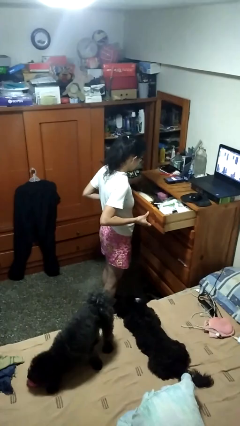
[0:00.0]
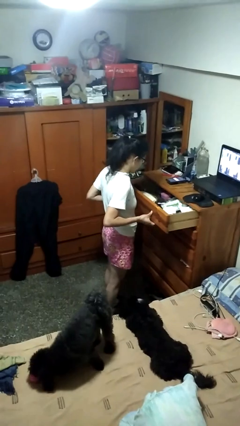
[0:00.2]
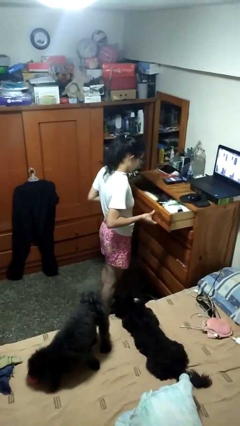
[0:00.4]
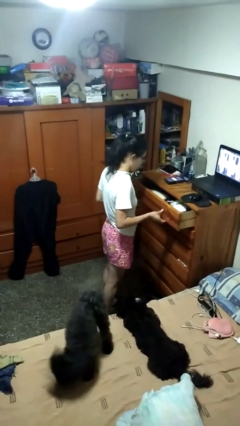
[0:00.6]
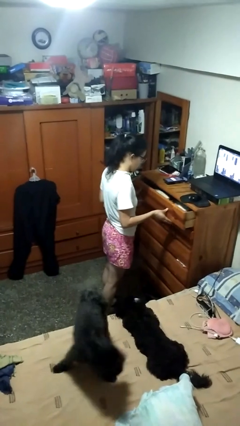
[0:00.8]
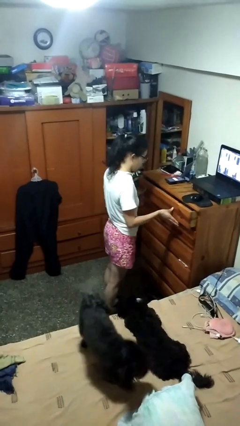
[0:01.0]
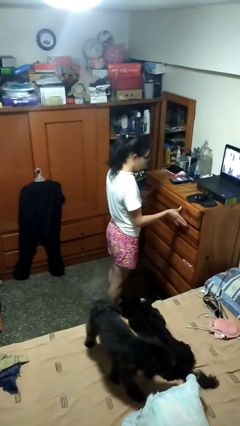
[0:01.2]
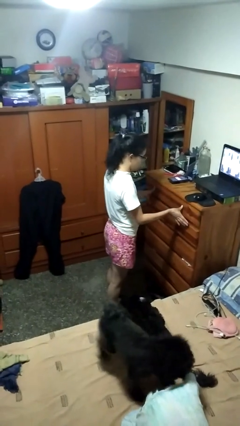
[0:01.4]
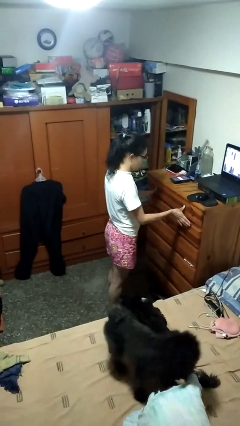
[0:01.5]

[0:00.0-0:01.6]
person closes dresser drawer

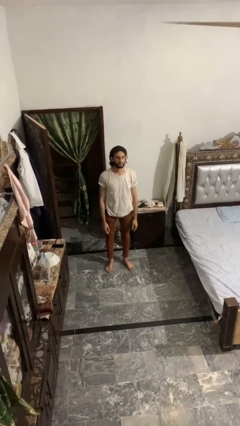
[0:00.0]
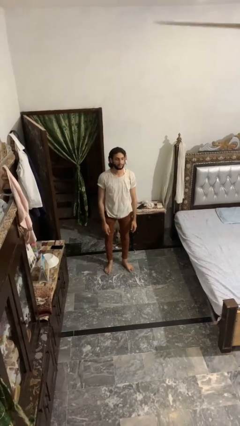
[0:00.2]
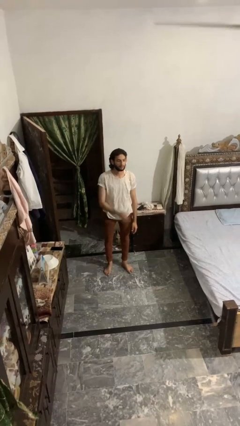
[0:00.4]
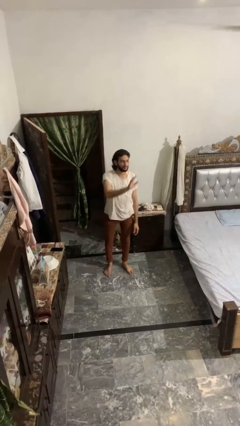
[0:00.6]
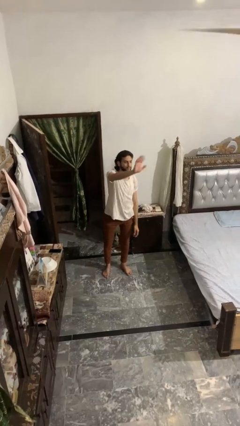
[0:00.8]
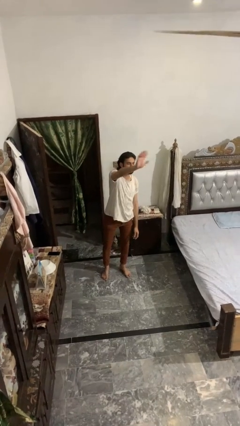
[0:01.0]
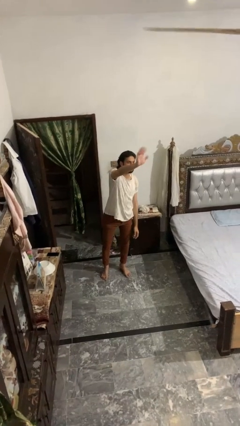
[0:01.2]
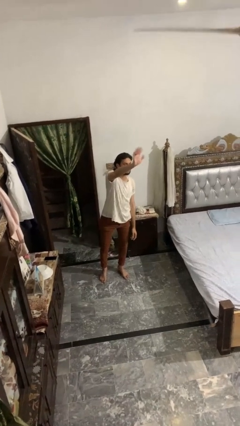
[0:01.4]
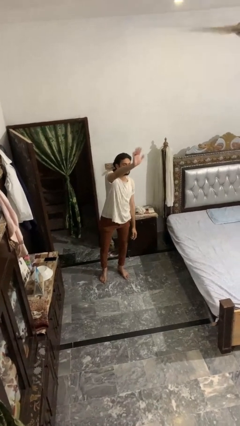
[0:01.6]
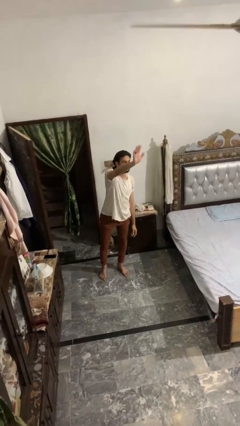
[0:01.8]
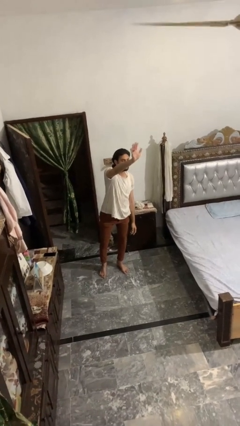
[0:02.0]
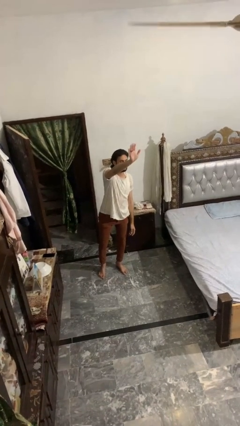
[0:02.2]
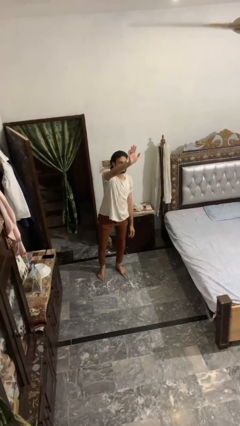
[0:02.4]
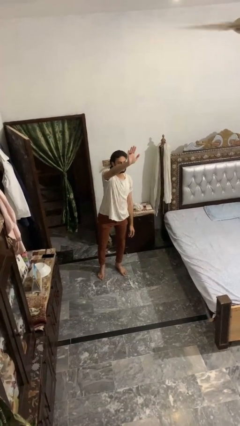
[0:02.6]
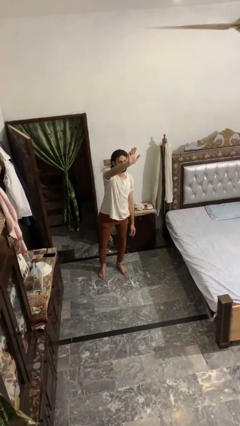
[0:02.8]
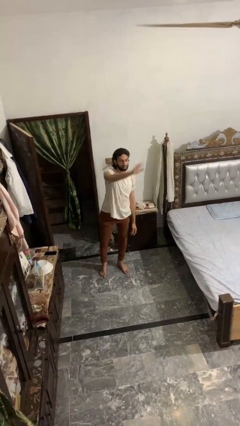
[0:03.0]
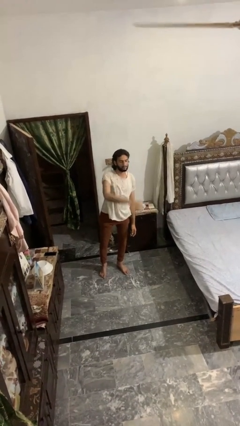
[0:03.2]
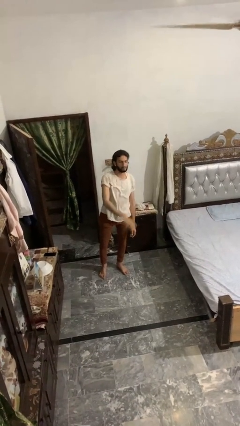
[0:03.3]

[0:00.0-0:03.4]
person waves at person

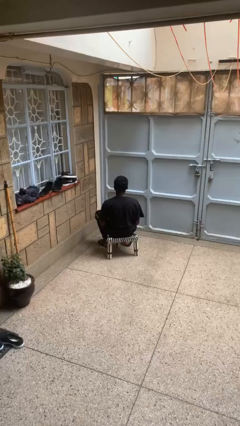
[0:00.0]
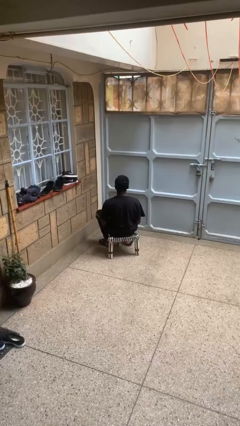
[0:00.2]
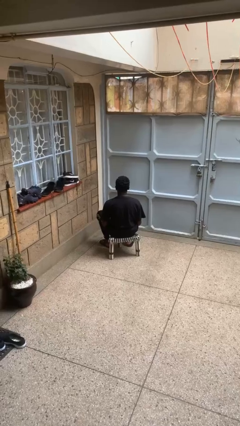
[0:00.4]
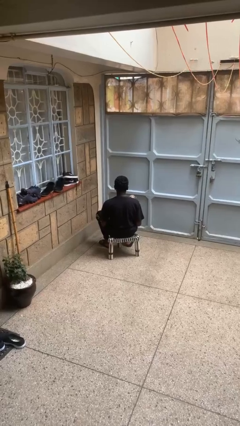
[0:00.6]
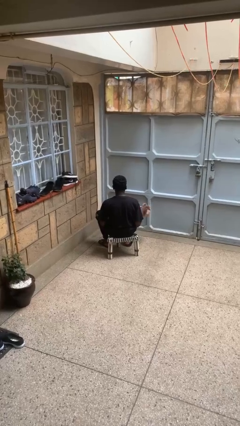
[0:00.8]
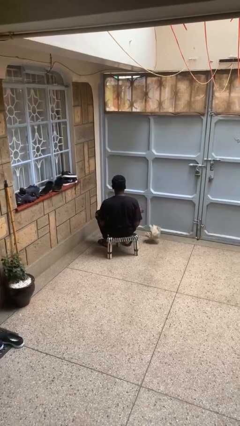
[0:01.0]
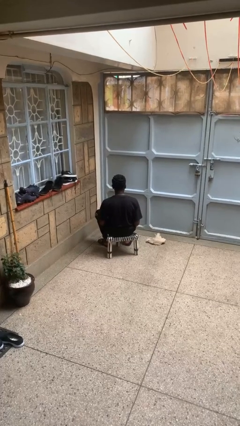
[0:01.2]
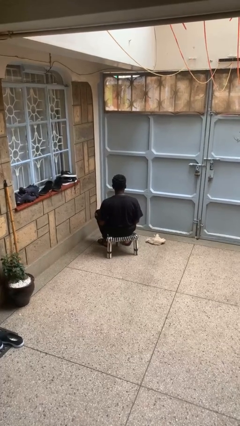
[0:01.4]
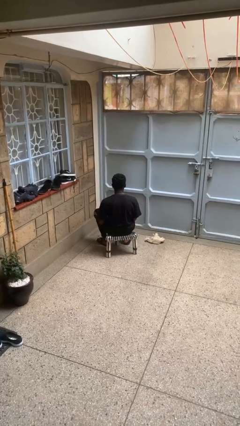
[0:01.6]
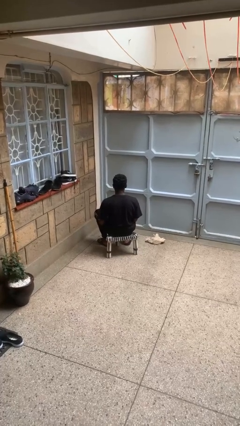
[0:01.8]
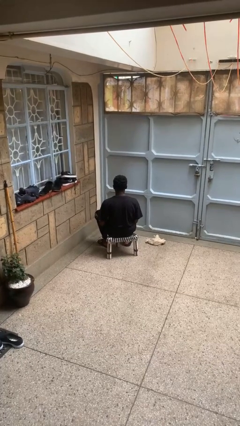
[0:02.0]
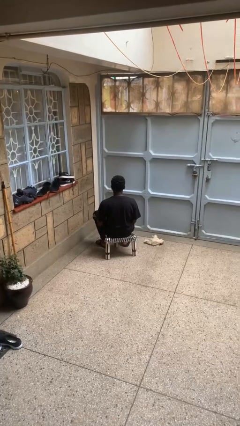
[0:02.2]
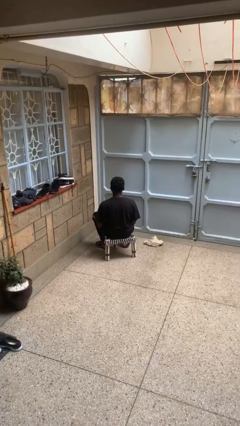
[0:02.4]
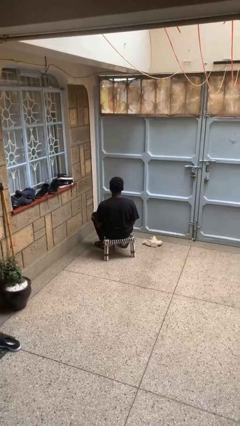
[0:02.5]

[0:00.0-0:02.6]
person throws object to ground

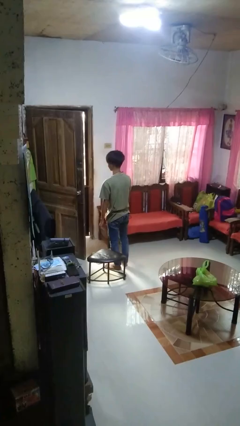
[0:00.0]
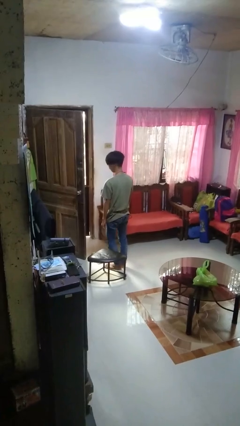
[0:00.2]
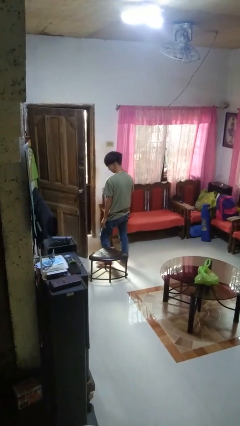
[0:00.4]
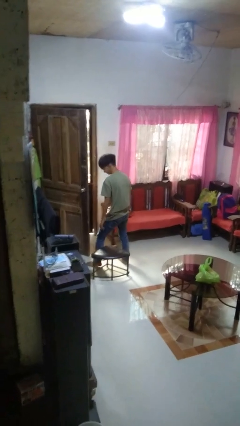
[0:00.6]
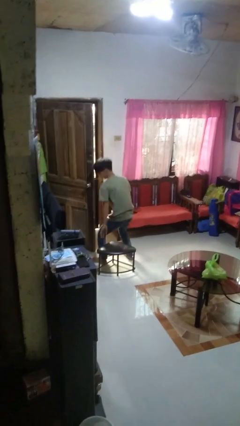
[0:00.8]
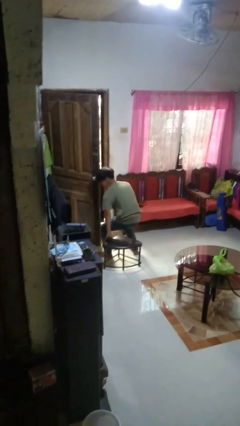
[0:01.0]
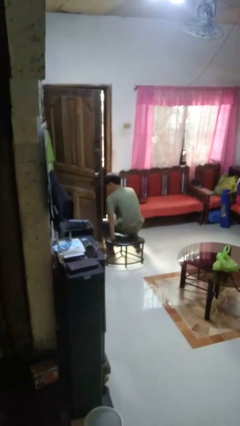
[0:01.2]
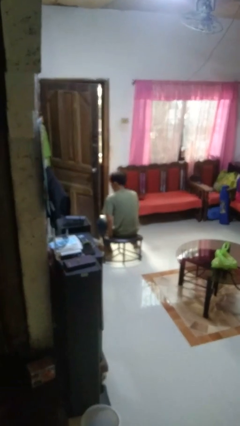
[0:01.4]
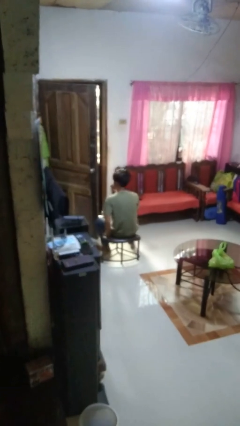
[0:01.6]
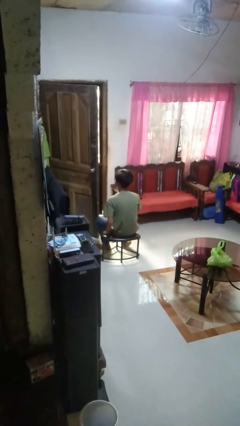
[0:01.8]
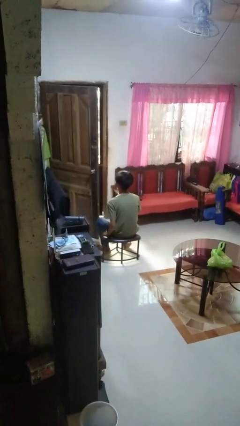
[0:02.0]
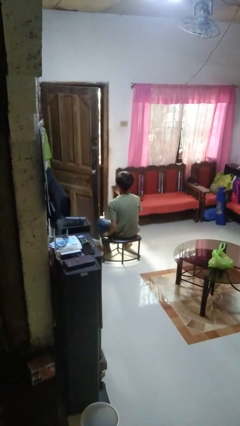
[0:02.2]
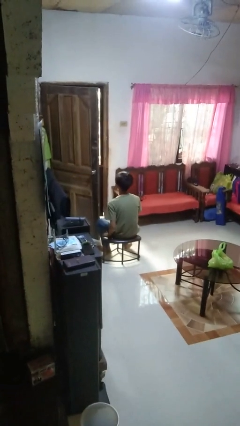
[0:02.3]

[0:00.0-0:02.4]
person sits down

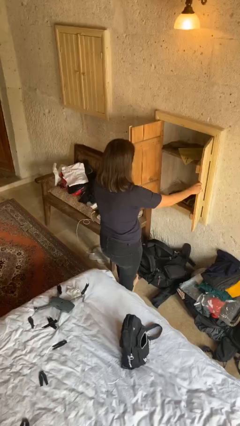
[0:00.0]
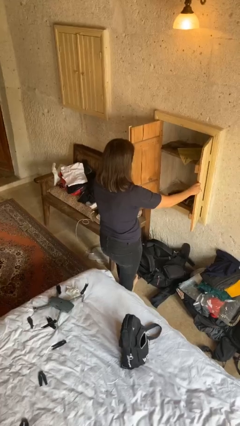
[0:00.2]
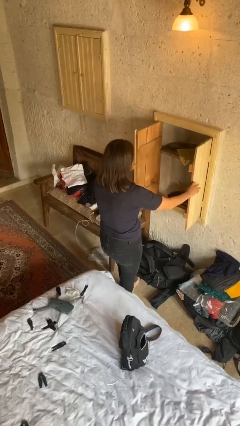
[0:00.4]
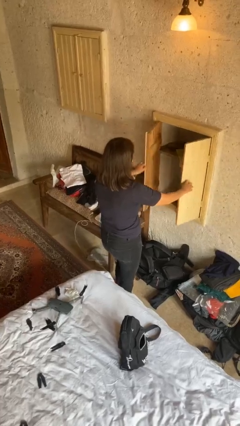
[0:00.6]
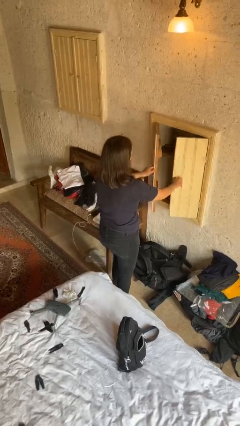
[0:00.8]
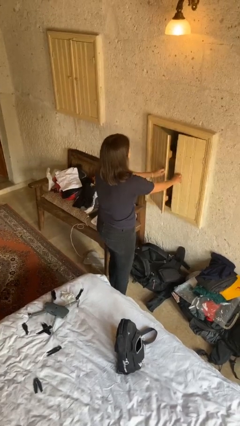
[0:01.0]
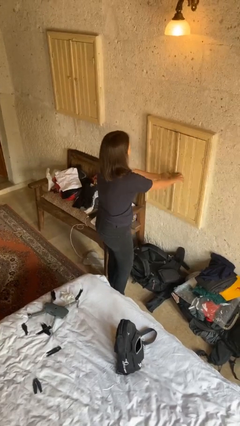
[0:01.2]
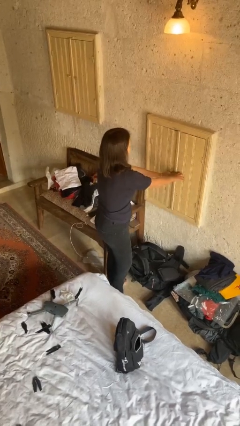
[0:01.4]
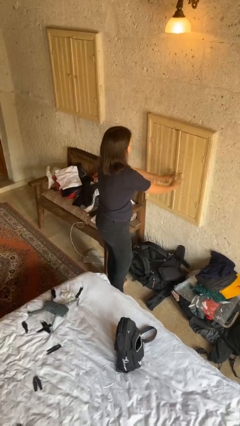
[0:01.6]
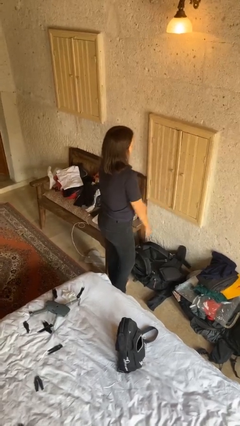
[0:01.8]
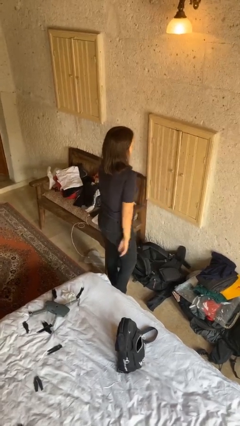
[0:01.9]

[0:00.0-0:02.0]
person closes closet door

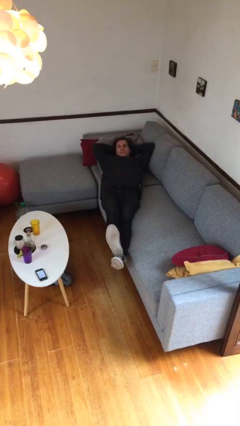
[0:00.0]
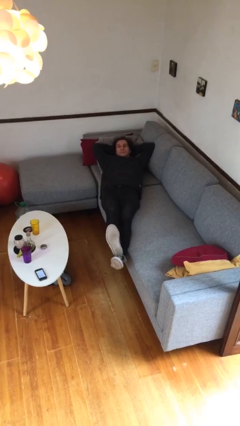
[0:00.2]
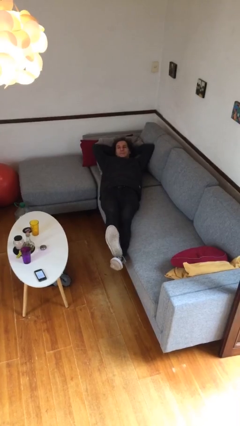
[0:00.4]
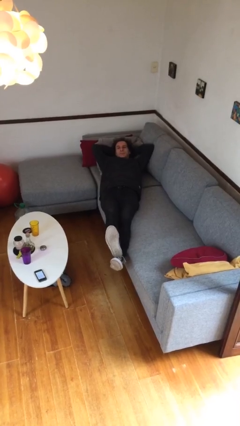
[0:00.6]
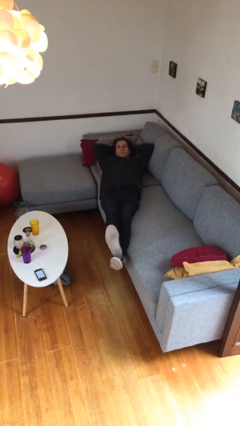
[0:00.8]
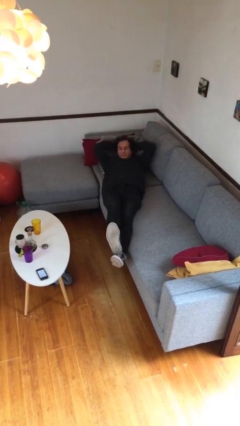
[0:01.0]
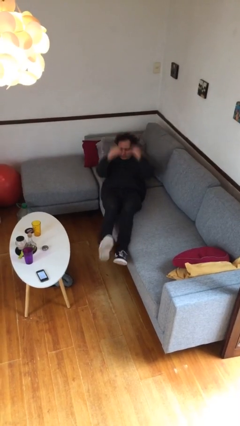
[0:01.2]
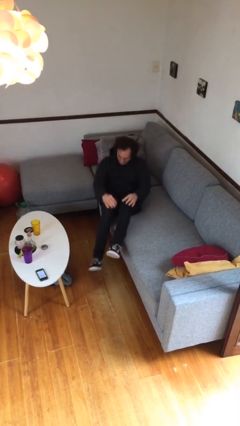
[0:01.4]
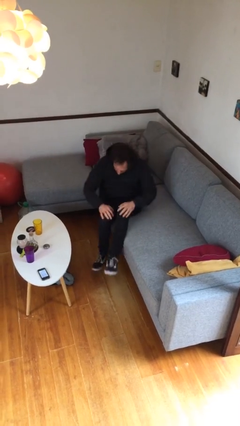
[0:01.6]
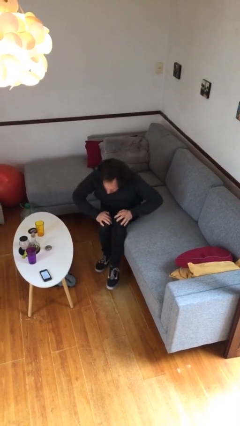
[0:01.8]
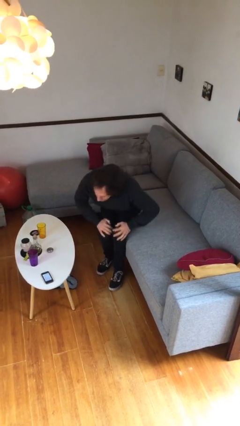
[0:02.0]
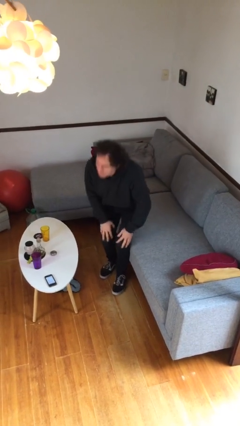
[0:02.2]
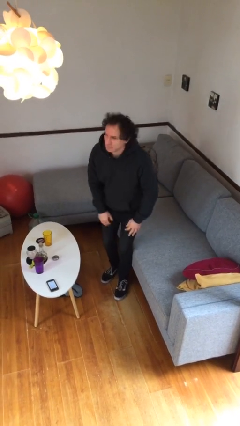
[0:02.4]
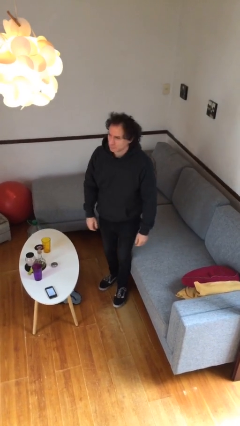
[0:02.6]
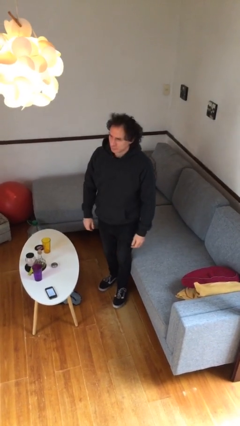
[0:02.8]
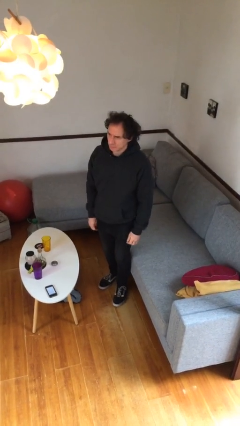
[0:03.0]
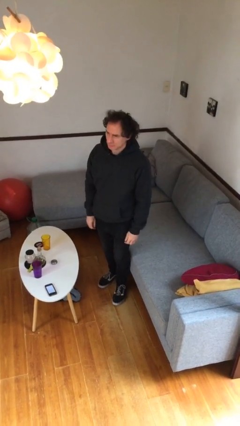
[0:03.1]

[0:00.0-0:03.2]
person stands up

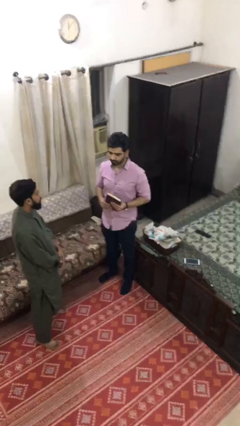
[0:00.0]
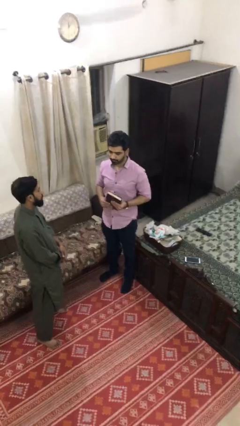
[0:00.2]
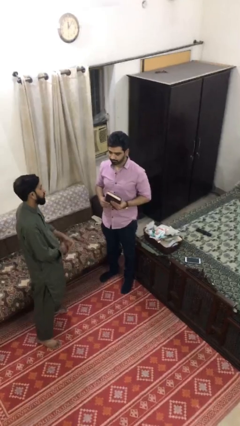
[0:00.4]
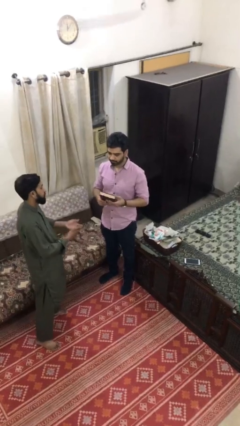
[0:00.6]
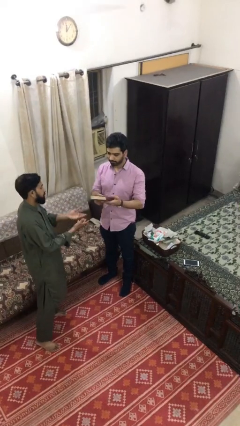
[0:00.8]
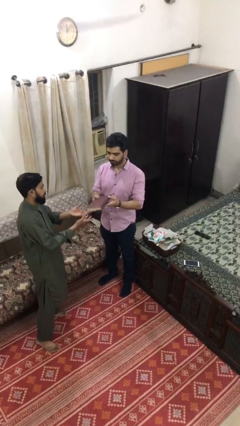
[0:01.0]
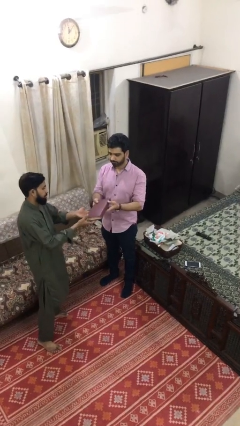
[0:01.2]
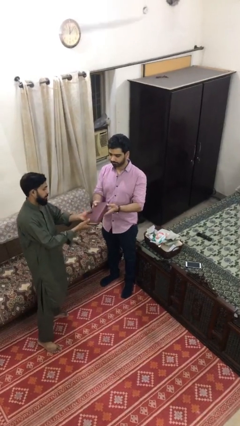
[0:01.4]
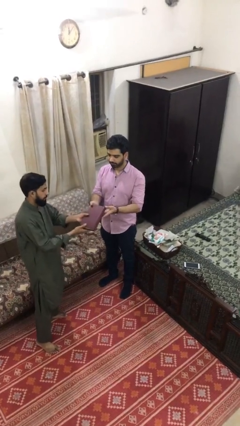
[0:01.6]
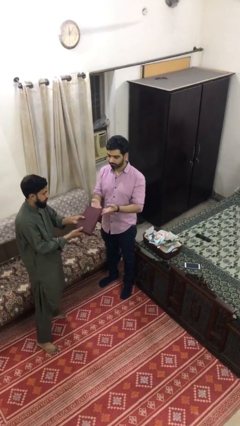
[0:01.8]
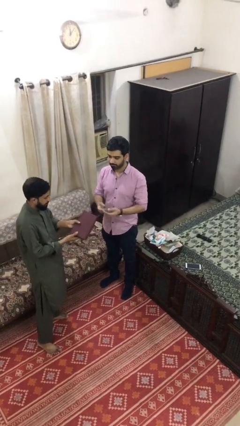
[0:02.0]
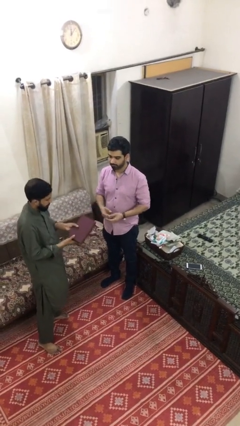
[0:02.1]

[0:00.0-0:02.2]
person transfers object to person
